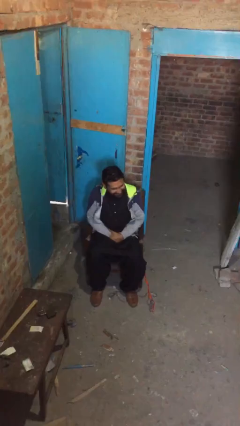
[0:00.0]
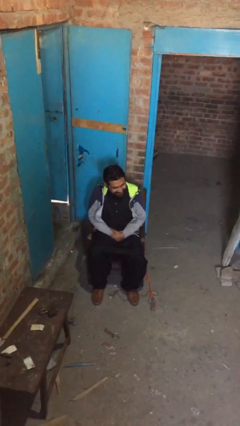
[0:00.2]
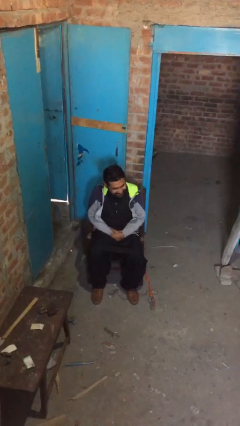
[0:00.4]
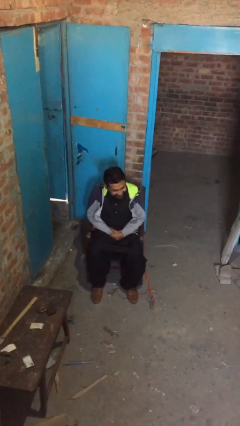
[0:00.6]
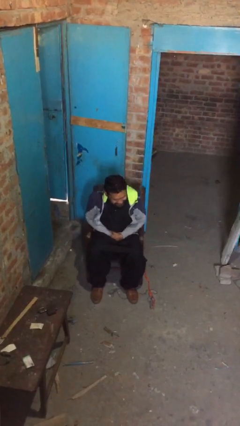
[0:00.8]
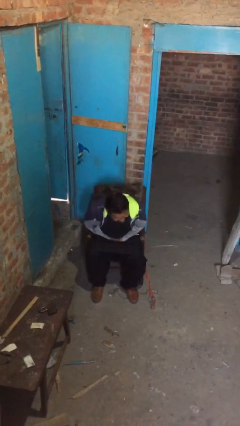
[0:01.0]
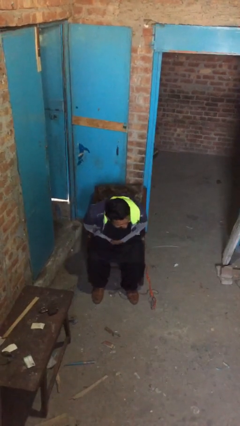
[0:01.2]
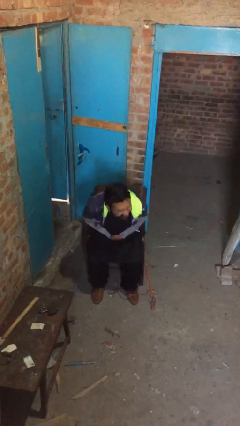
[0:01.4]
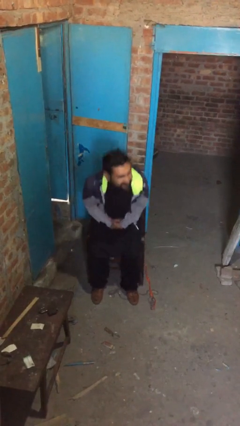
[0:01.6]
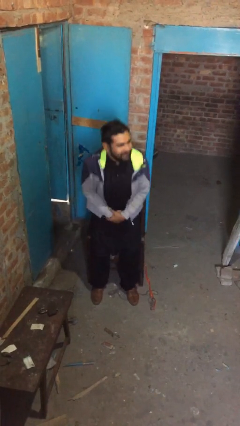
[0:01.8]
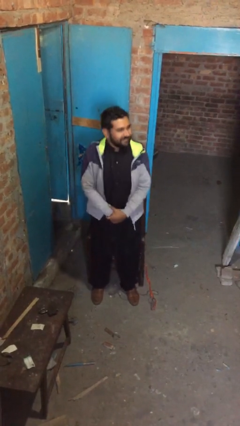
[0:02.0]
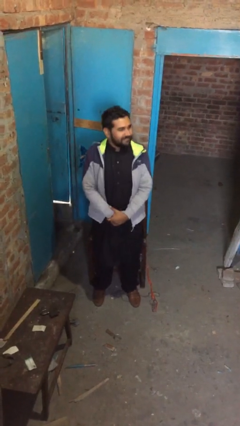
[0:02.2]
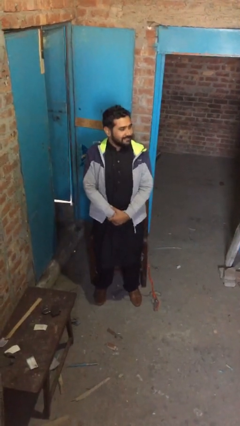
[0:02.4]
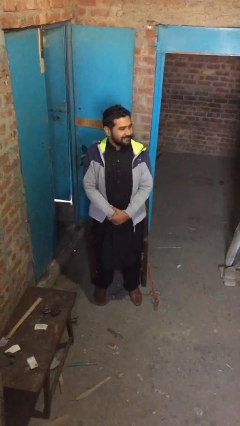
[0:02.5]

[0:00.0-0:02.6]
person stands up

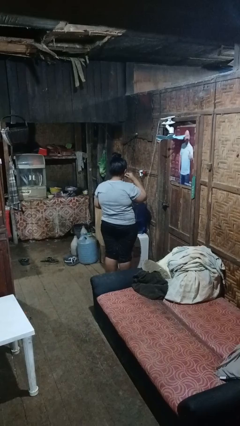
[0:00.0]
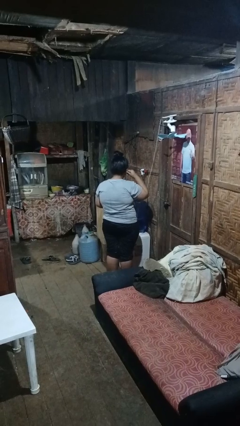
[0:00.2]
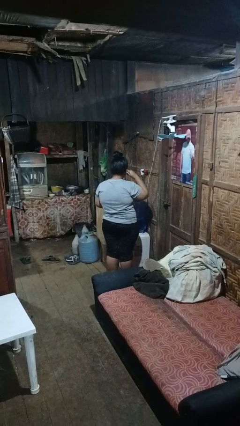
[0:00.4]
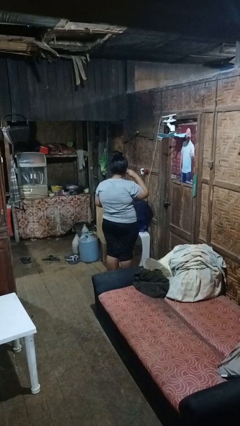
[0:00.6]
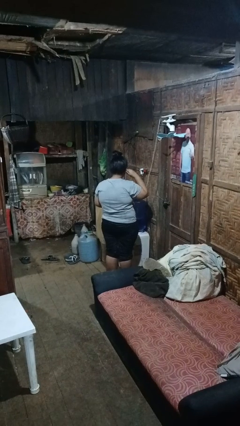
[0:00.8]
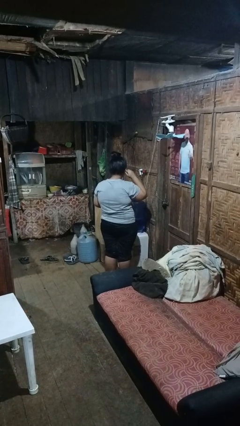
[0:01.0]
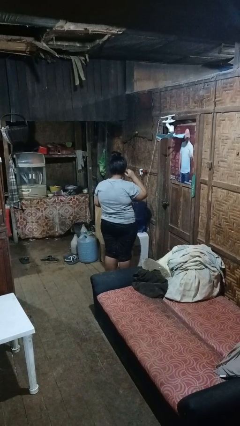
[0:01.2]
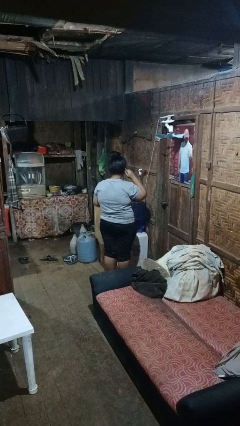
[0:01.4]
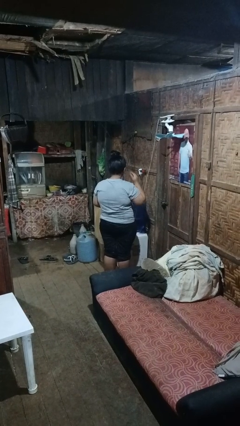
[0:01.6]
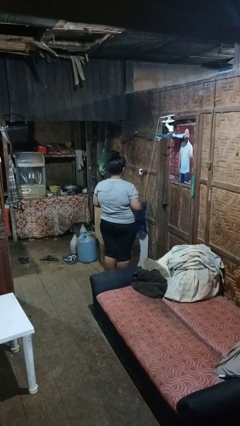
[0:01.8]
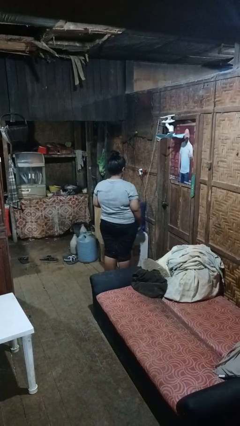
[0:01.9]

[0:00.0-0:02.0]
person puts on headphones

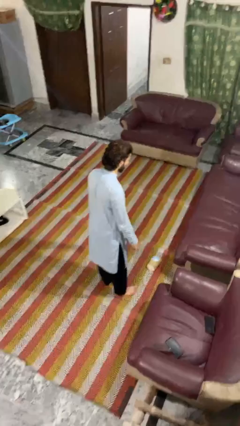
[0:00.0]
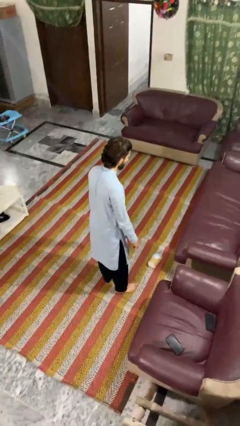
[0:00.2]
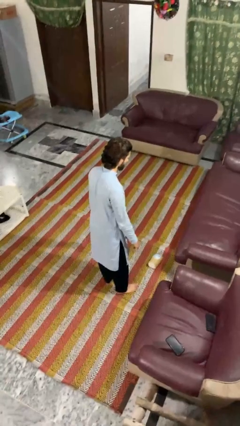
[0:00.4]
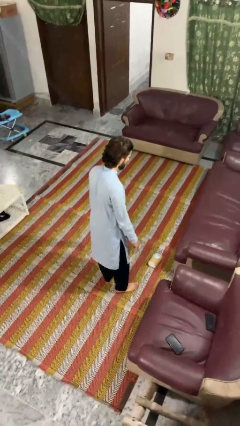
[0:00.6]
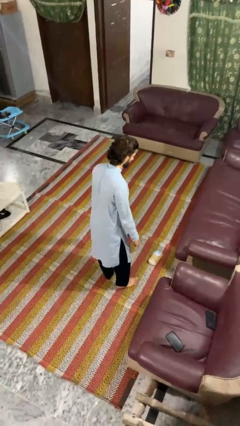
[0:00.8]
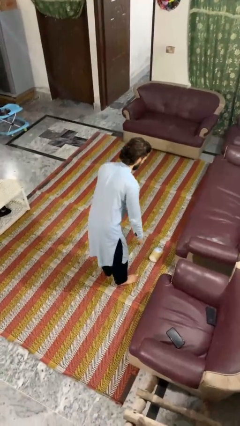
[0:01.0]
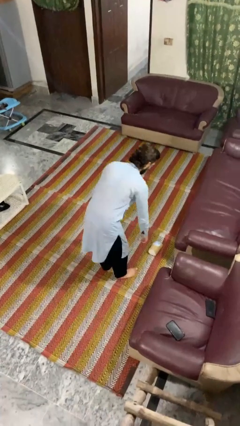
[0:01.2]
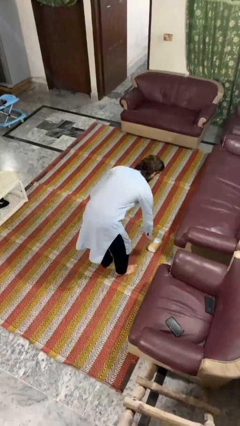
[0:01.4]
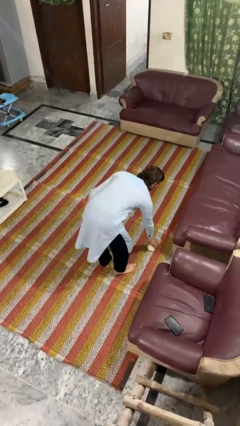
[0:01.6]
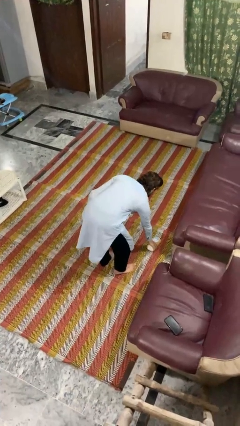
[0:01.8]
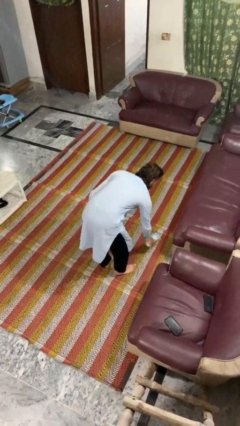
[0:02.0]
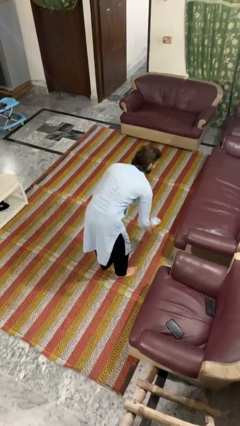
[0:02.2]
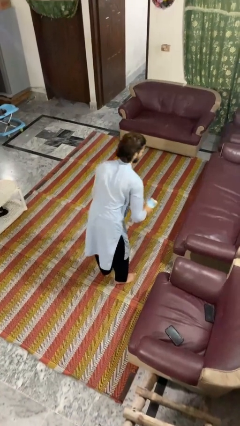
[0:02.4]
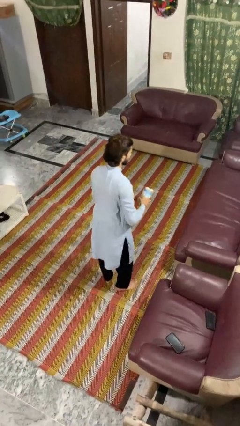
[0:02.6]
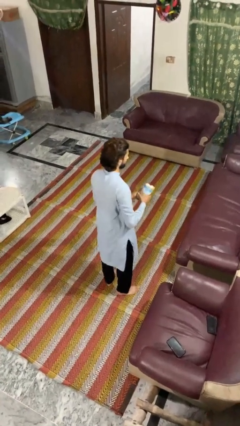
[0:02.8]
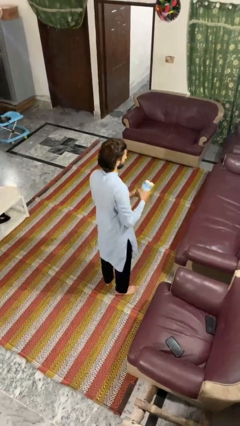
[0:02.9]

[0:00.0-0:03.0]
person picks up object from floor

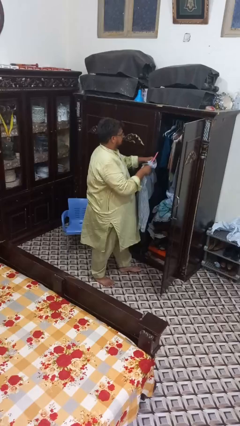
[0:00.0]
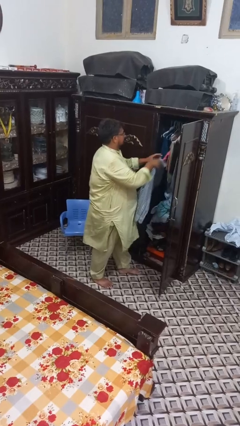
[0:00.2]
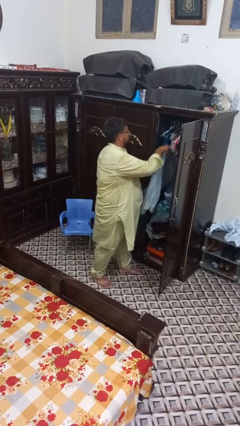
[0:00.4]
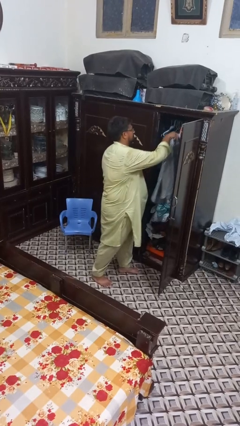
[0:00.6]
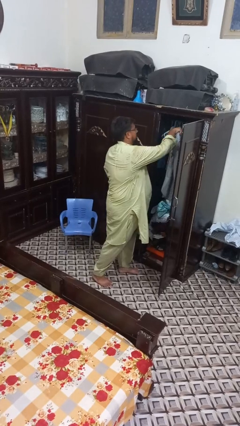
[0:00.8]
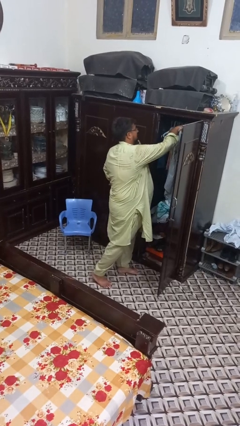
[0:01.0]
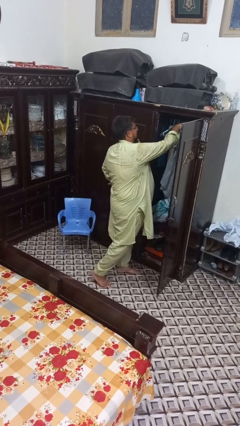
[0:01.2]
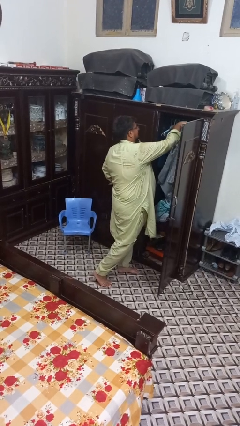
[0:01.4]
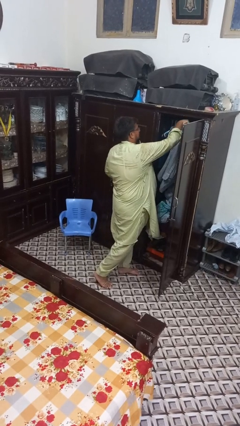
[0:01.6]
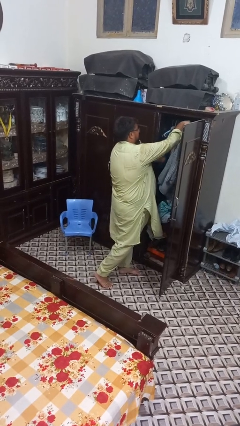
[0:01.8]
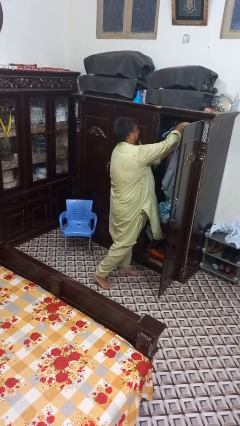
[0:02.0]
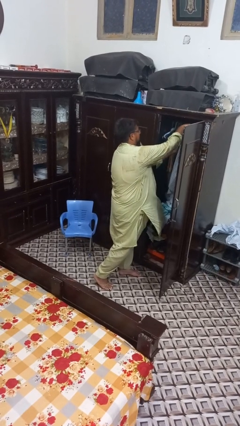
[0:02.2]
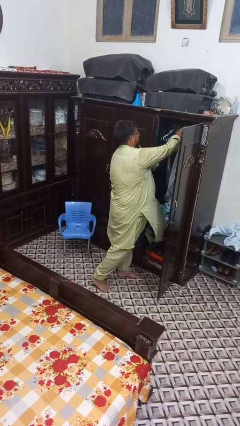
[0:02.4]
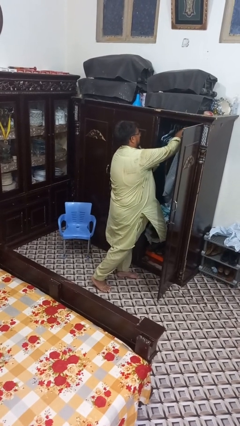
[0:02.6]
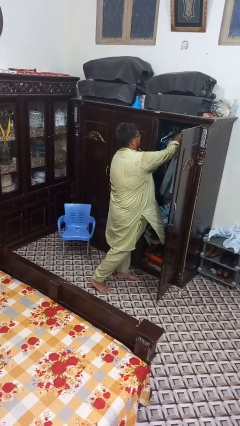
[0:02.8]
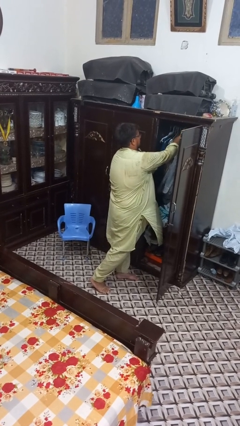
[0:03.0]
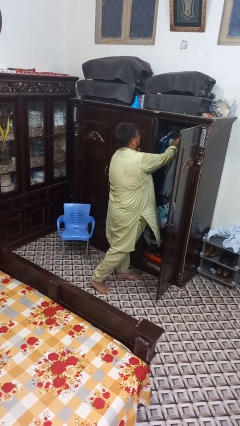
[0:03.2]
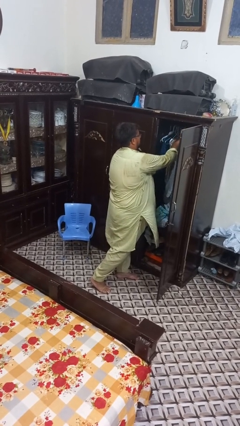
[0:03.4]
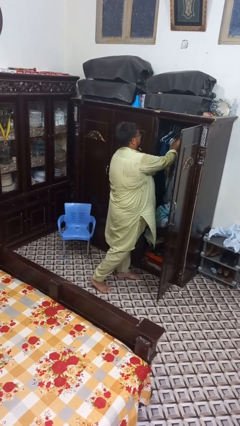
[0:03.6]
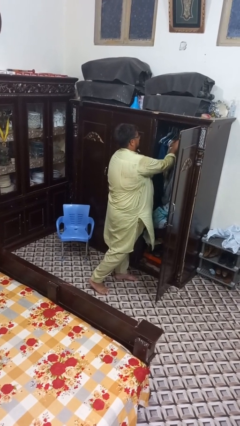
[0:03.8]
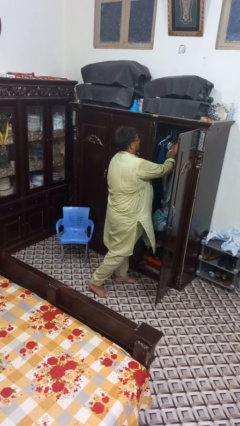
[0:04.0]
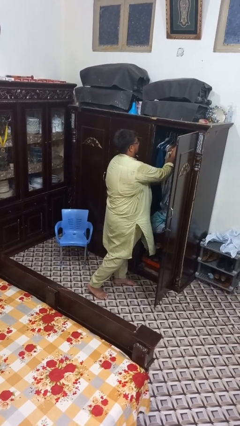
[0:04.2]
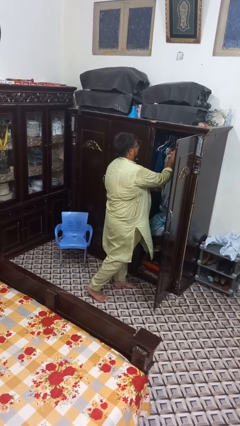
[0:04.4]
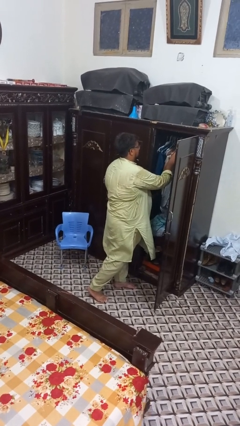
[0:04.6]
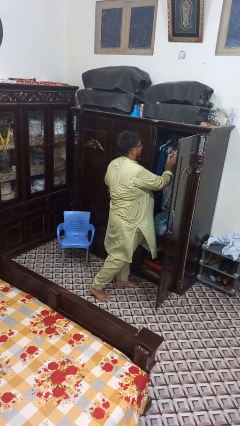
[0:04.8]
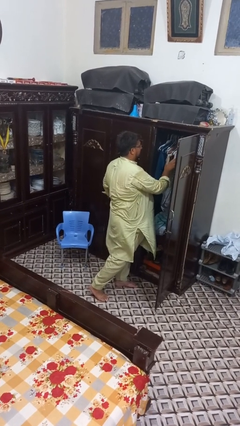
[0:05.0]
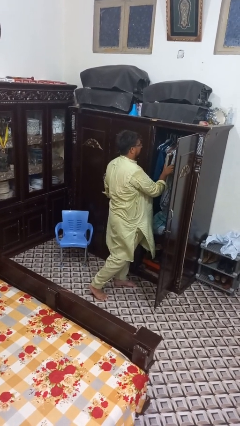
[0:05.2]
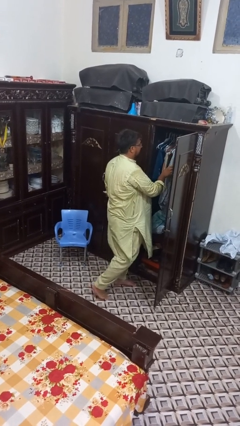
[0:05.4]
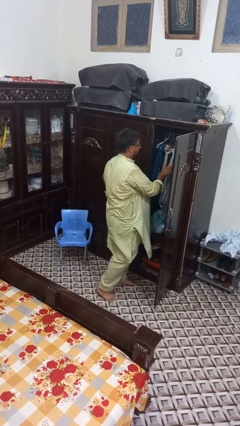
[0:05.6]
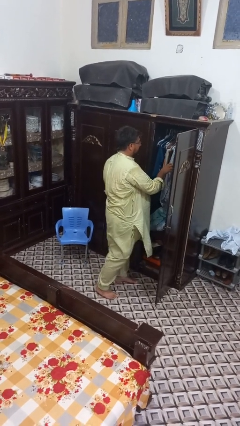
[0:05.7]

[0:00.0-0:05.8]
person puts clothes into closet

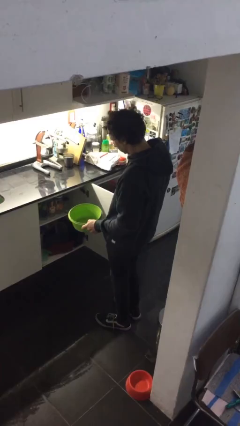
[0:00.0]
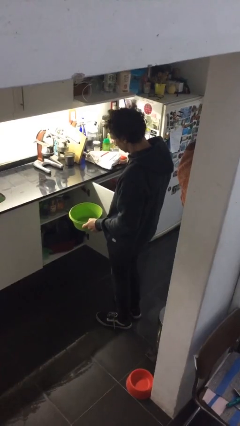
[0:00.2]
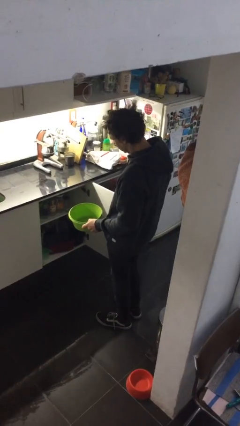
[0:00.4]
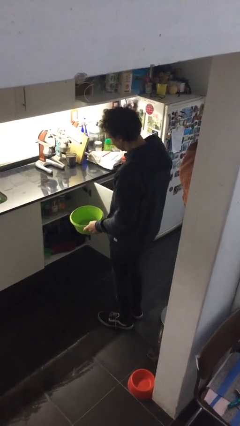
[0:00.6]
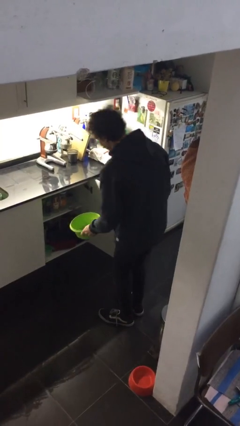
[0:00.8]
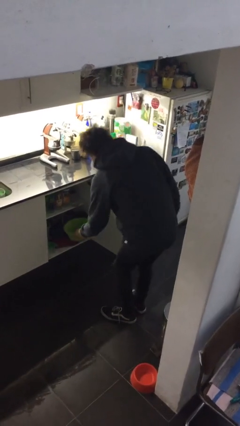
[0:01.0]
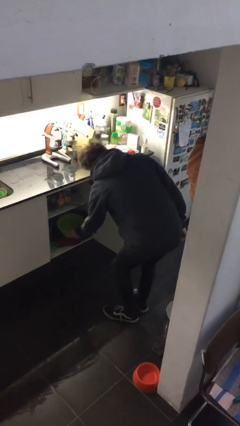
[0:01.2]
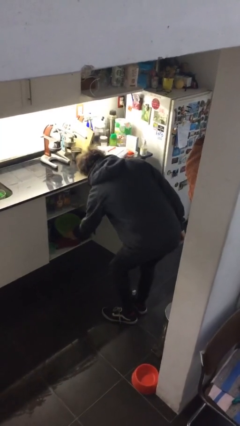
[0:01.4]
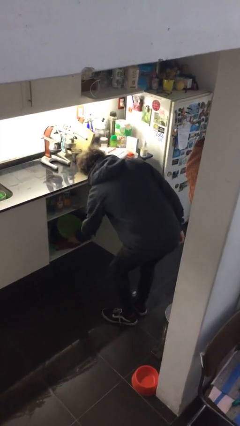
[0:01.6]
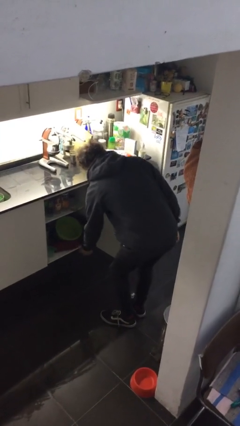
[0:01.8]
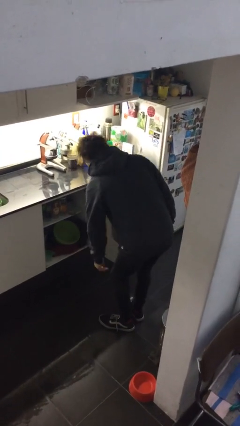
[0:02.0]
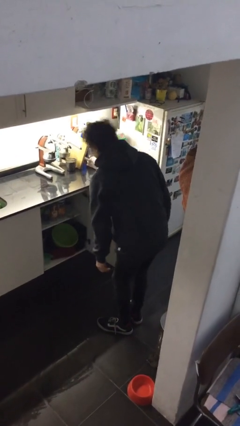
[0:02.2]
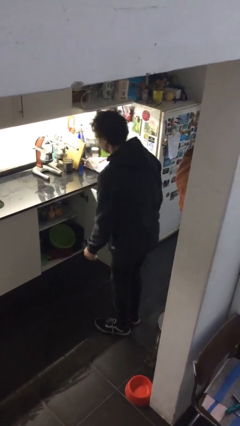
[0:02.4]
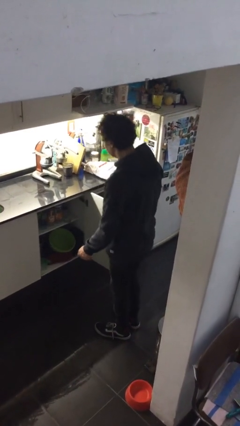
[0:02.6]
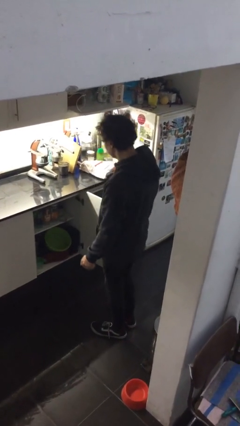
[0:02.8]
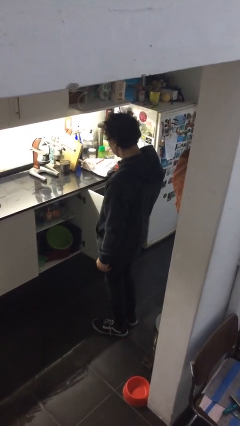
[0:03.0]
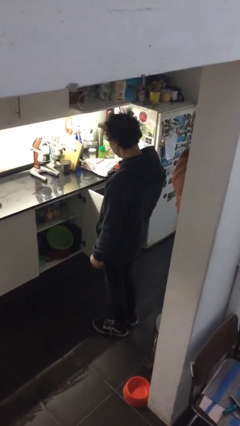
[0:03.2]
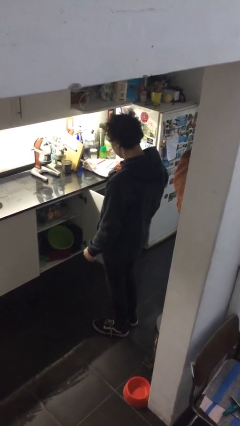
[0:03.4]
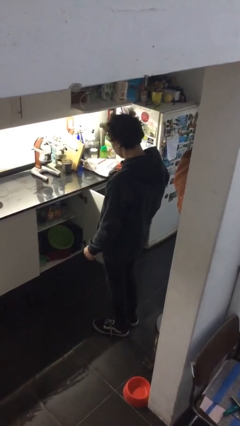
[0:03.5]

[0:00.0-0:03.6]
person puts down object into cabinet

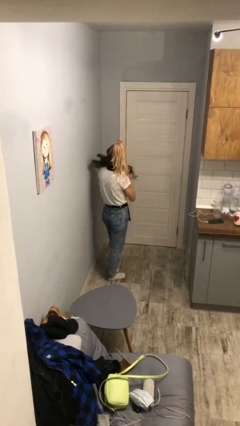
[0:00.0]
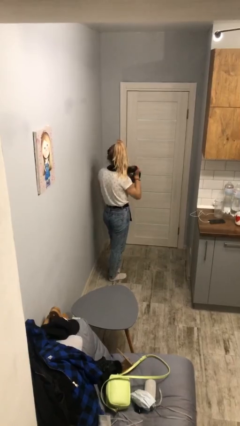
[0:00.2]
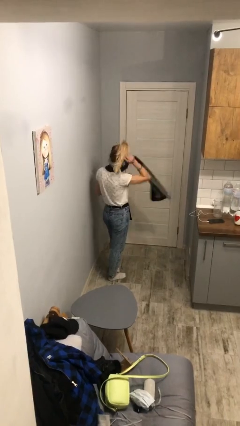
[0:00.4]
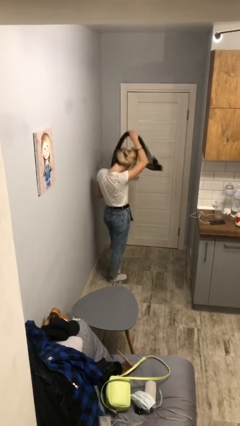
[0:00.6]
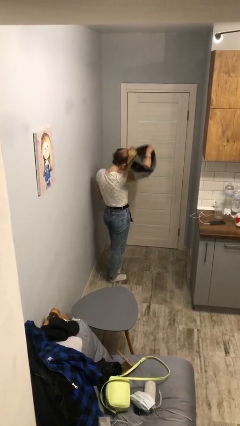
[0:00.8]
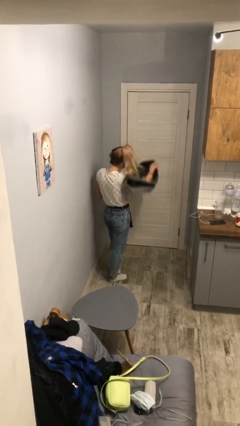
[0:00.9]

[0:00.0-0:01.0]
person takes off scarf
